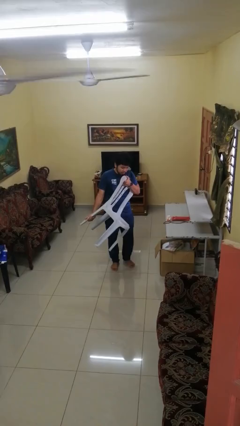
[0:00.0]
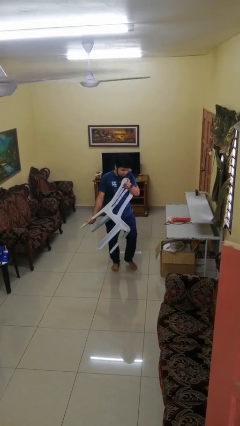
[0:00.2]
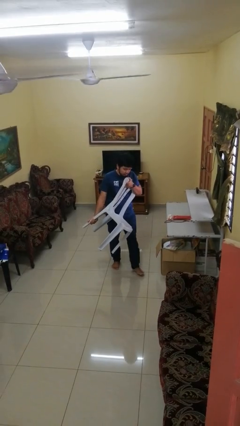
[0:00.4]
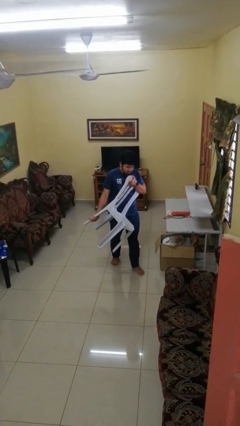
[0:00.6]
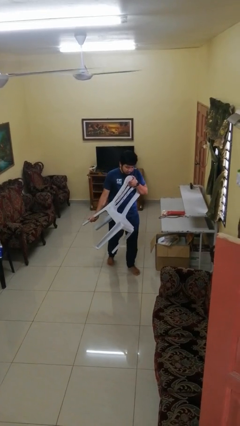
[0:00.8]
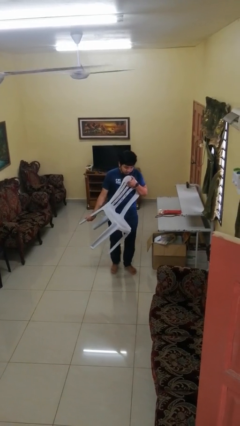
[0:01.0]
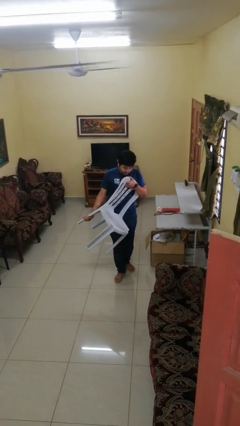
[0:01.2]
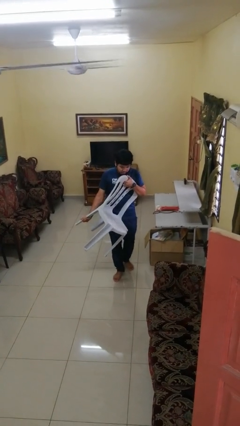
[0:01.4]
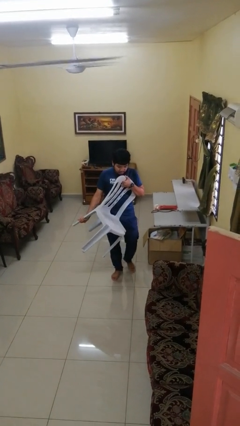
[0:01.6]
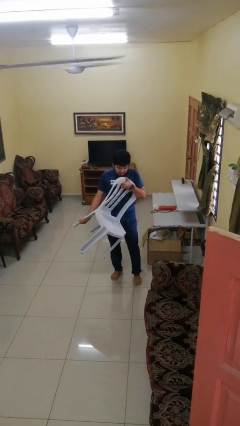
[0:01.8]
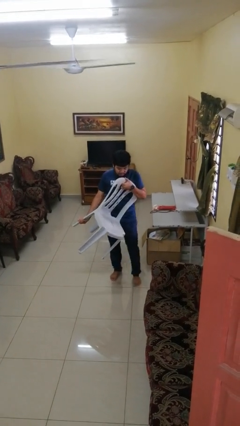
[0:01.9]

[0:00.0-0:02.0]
person carries furniture

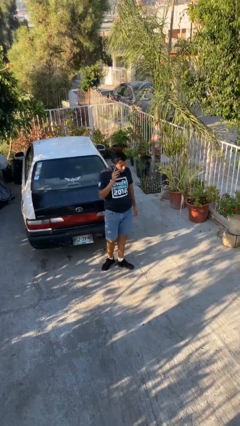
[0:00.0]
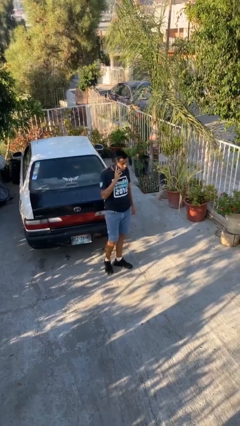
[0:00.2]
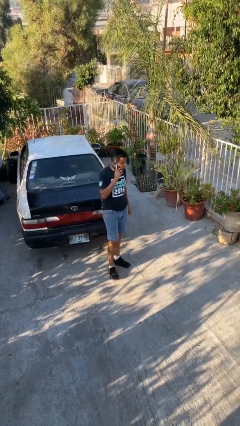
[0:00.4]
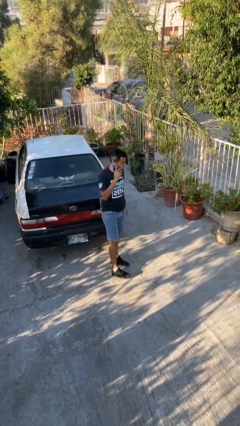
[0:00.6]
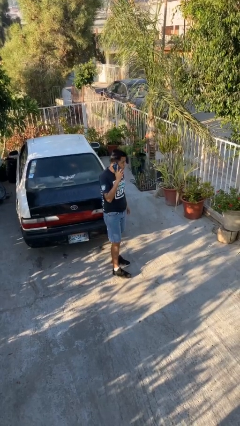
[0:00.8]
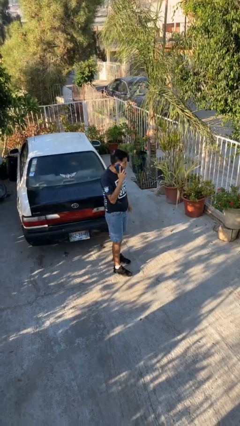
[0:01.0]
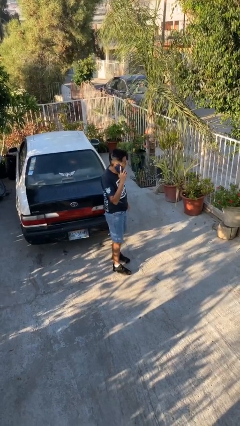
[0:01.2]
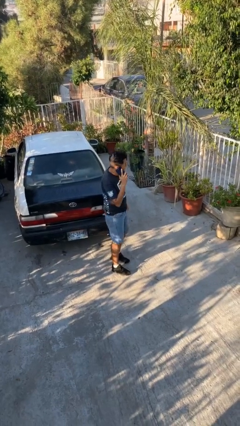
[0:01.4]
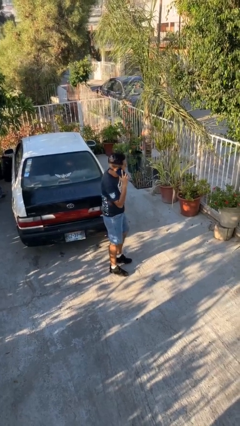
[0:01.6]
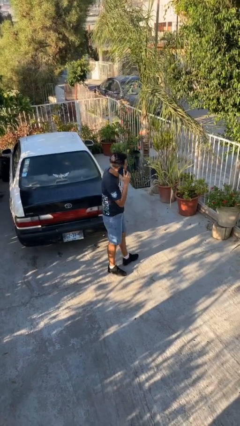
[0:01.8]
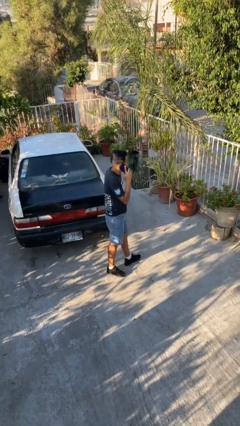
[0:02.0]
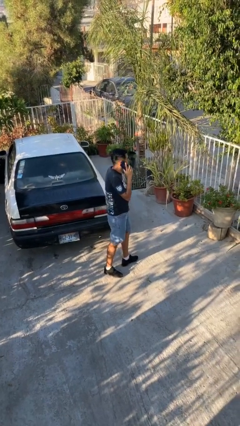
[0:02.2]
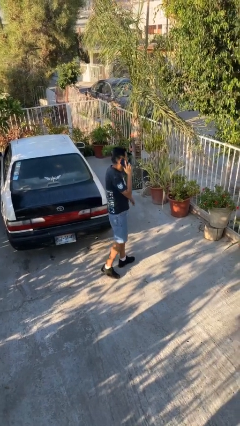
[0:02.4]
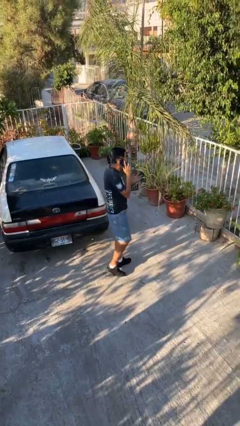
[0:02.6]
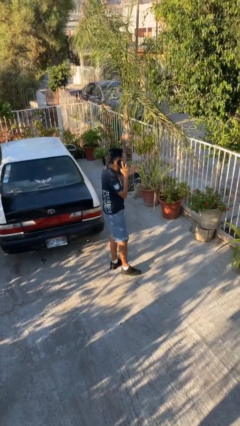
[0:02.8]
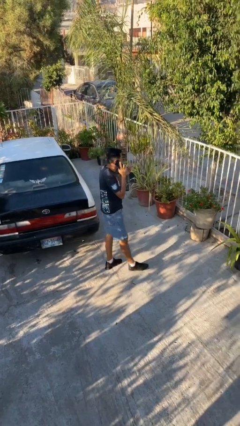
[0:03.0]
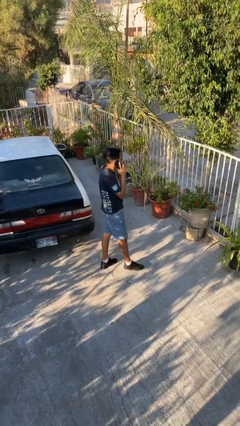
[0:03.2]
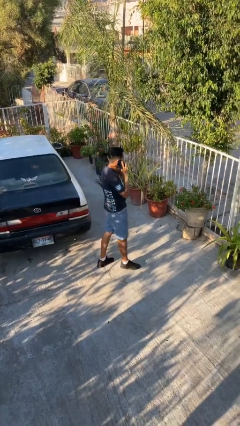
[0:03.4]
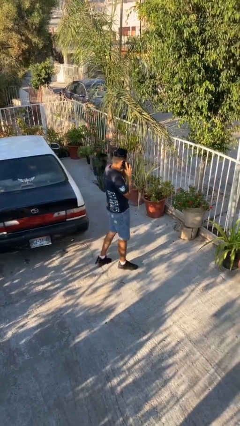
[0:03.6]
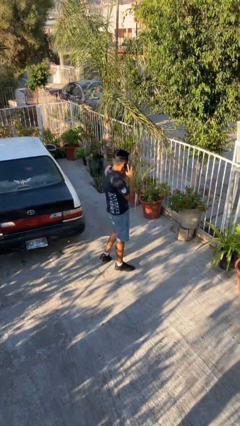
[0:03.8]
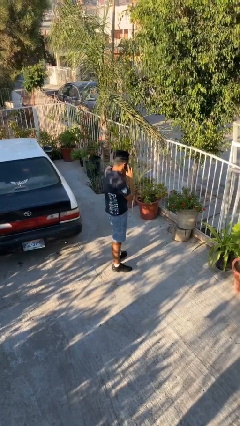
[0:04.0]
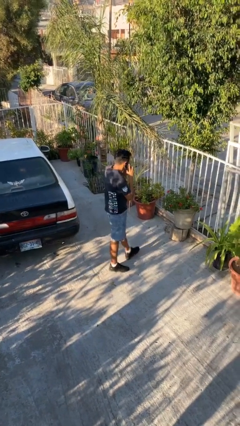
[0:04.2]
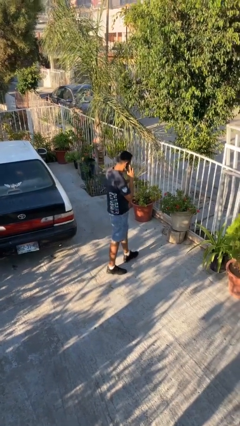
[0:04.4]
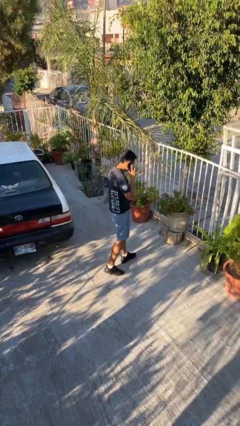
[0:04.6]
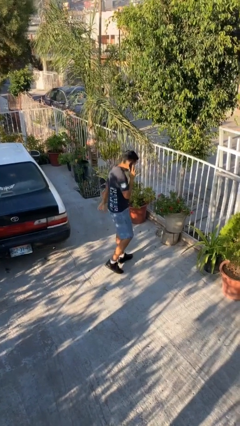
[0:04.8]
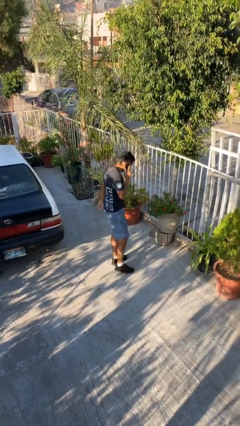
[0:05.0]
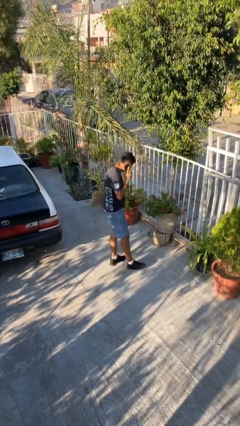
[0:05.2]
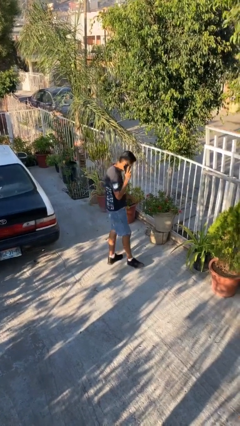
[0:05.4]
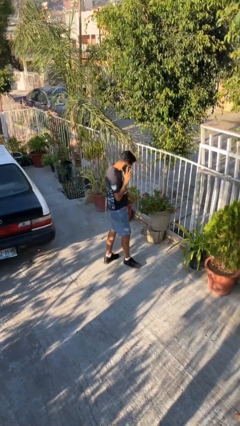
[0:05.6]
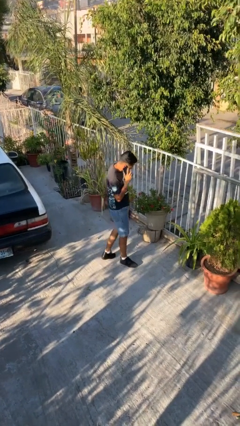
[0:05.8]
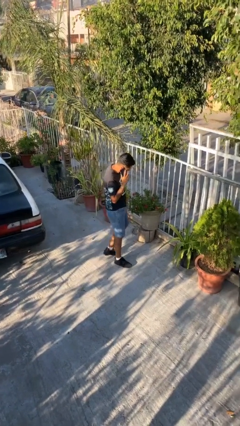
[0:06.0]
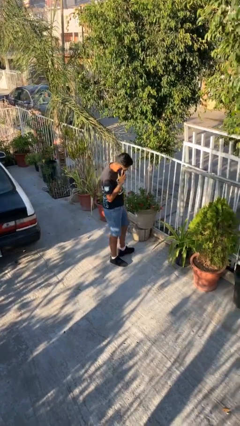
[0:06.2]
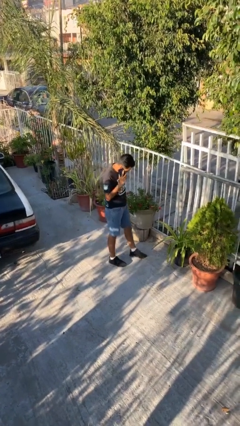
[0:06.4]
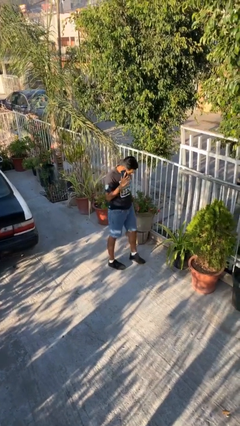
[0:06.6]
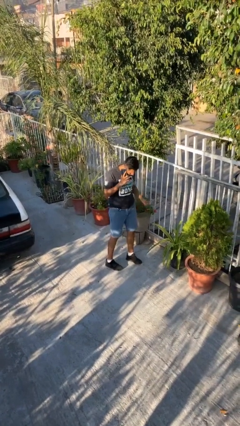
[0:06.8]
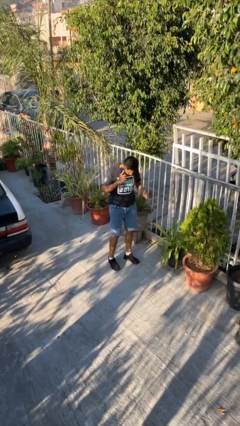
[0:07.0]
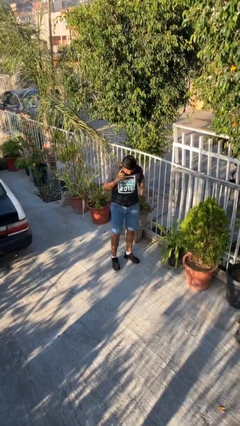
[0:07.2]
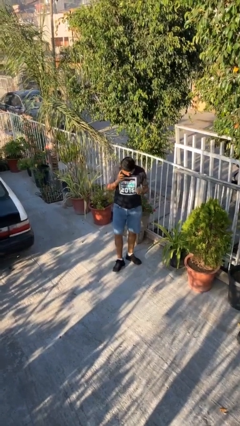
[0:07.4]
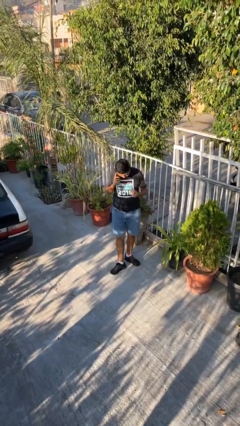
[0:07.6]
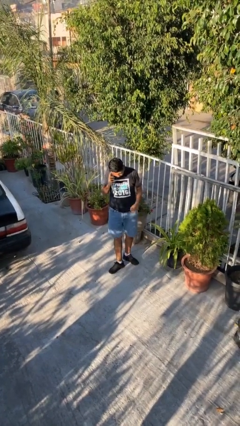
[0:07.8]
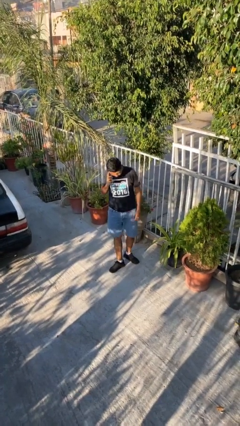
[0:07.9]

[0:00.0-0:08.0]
person talks on phone

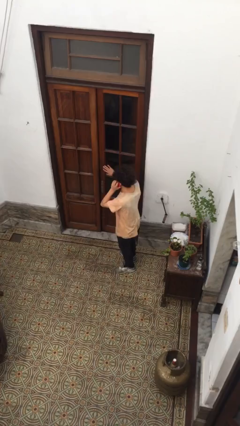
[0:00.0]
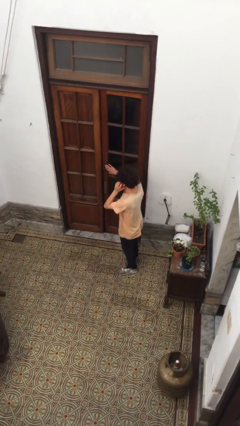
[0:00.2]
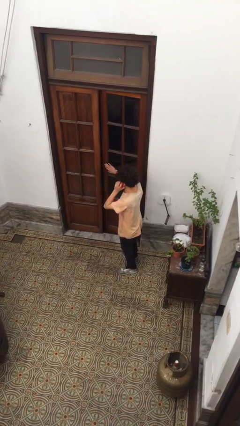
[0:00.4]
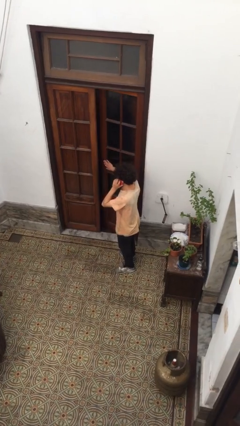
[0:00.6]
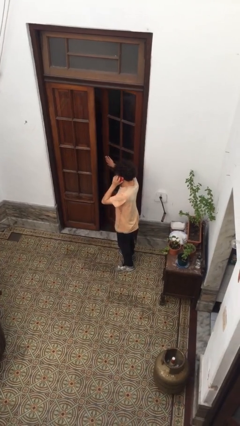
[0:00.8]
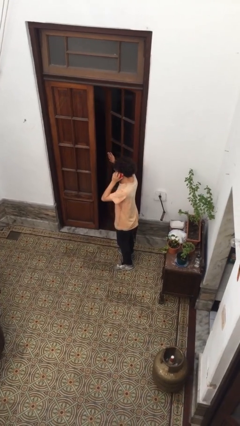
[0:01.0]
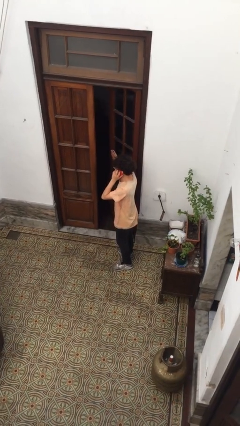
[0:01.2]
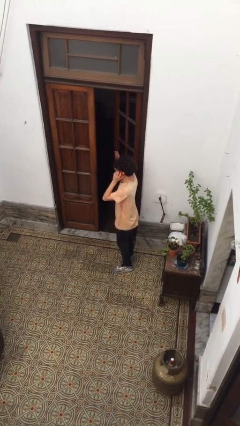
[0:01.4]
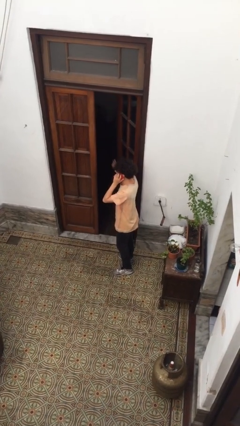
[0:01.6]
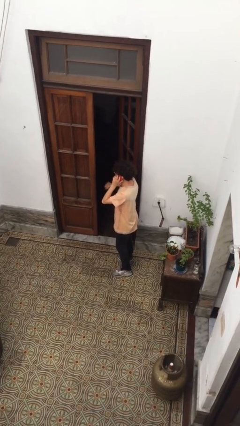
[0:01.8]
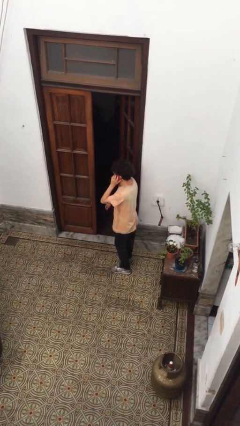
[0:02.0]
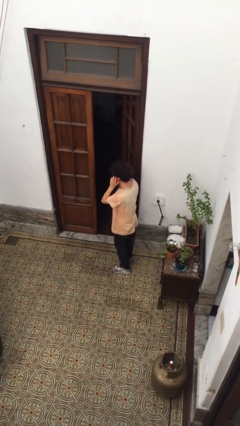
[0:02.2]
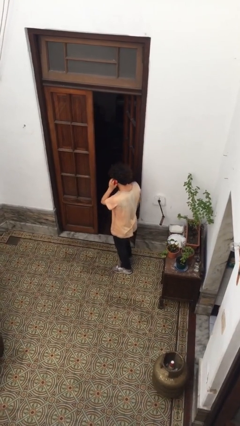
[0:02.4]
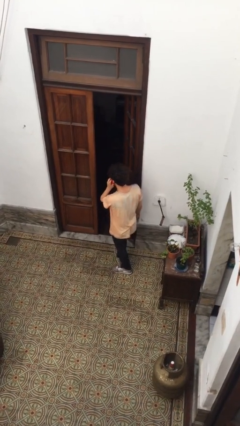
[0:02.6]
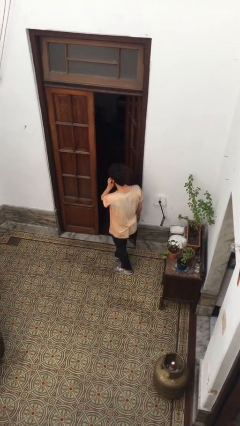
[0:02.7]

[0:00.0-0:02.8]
person opens facility door

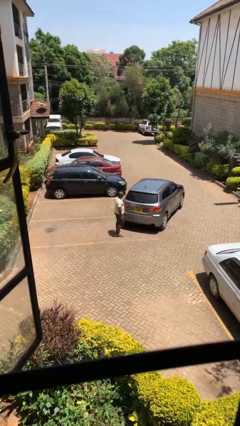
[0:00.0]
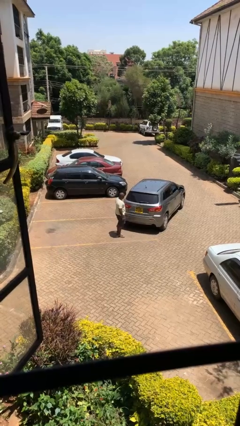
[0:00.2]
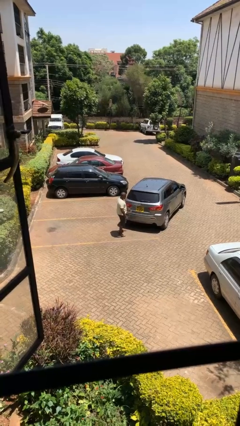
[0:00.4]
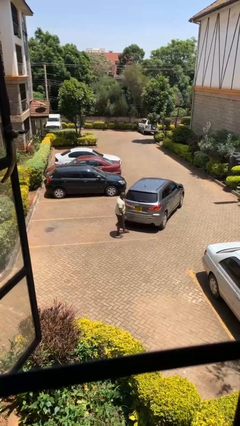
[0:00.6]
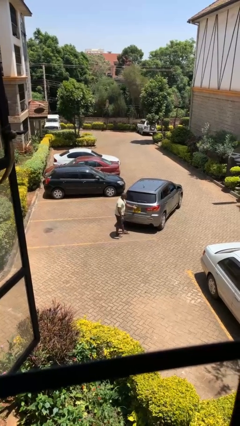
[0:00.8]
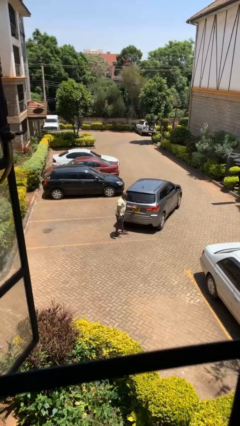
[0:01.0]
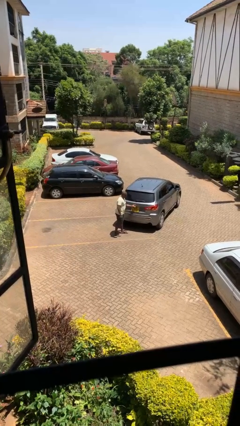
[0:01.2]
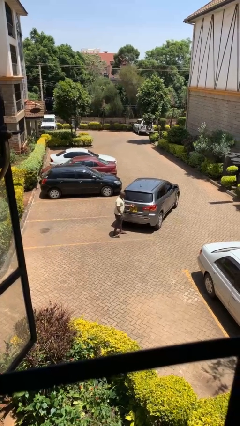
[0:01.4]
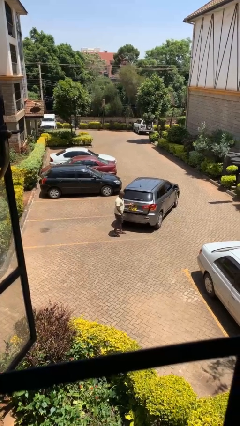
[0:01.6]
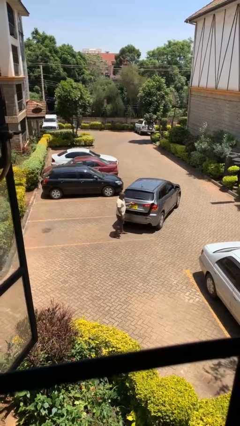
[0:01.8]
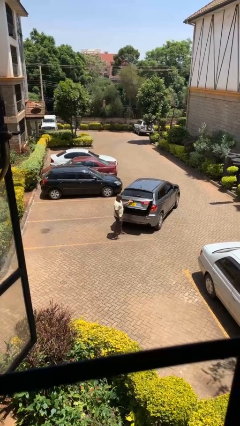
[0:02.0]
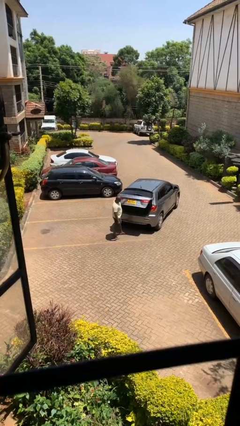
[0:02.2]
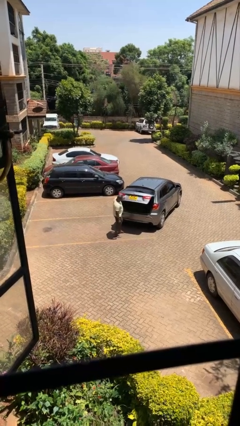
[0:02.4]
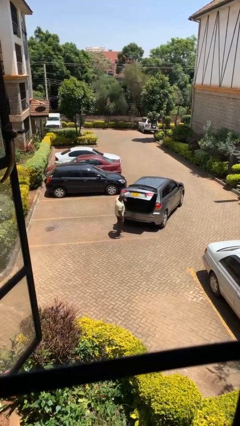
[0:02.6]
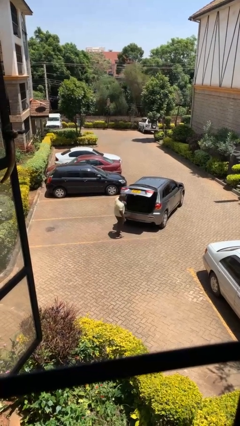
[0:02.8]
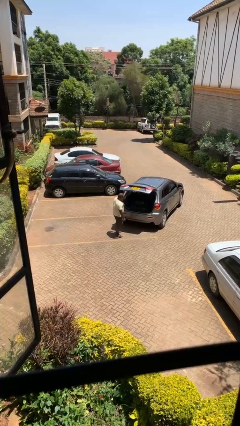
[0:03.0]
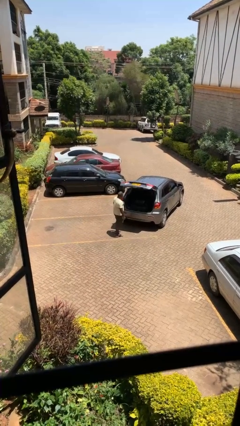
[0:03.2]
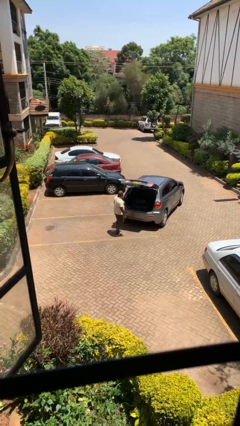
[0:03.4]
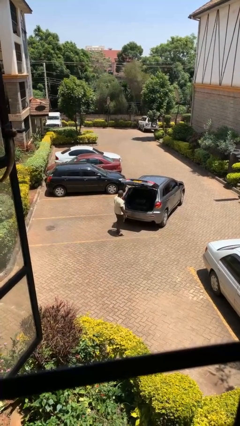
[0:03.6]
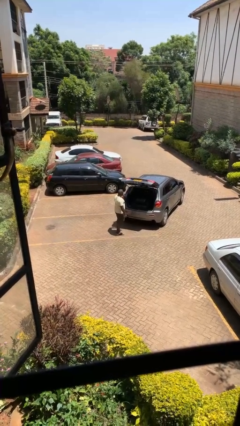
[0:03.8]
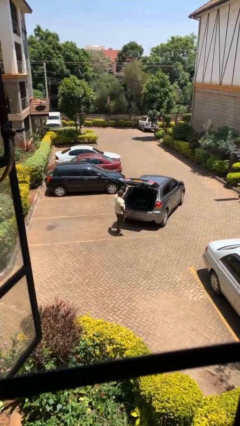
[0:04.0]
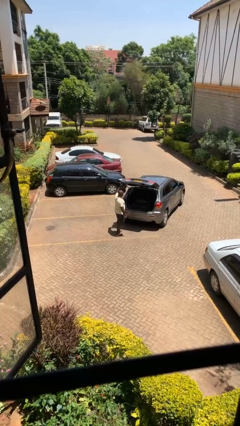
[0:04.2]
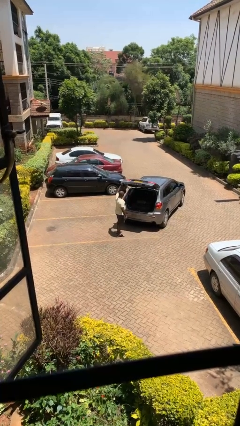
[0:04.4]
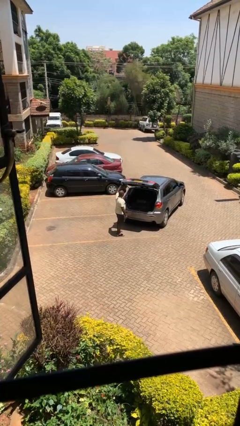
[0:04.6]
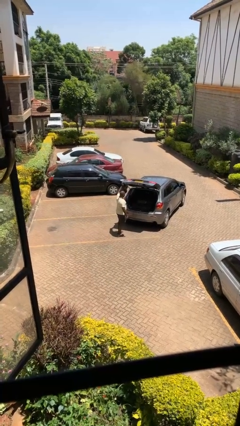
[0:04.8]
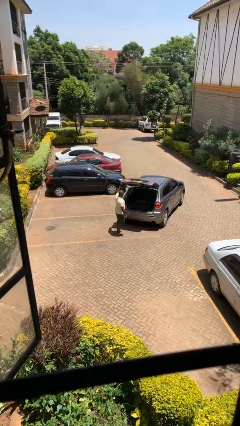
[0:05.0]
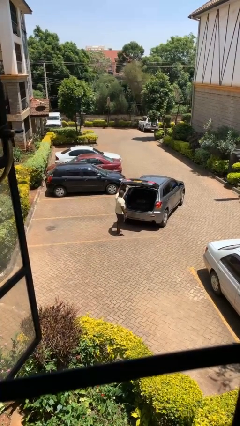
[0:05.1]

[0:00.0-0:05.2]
person opens car trunk
